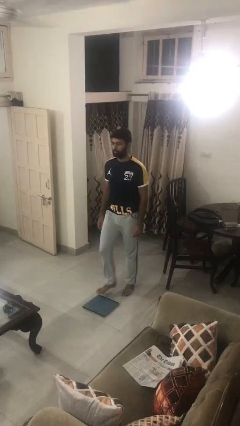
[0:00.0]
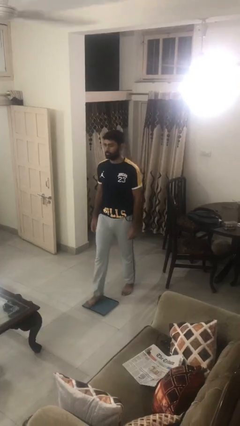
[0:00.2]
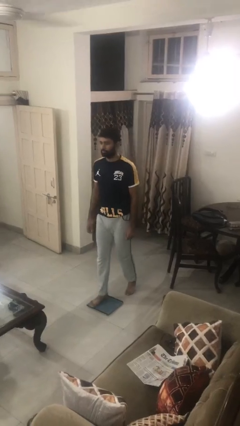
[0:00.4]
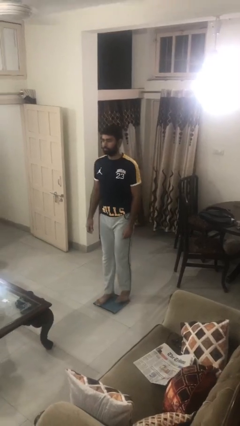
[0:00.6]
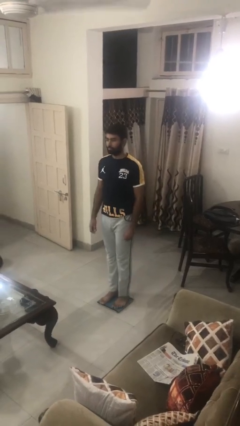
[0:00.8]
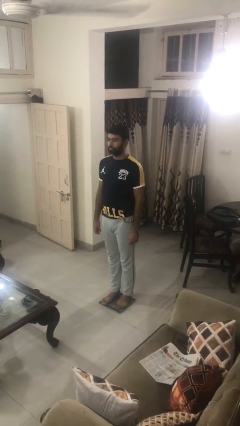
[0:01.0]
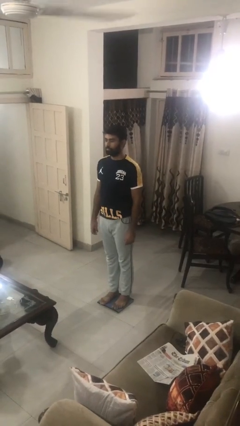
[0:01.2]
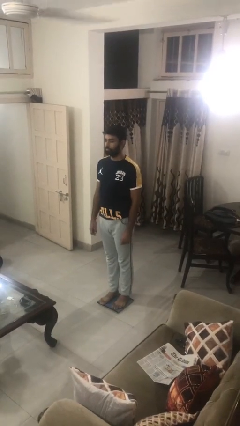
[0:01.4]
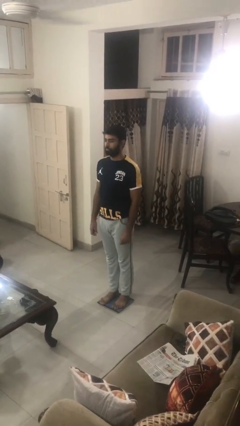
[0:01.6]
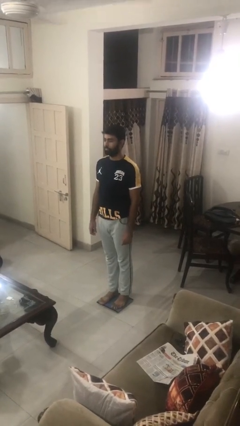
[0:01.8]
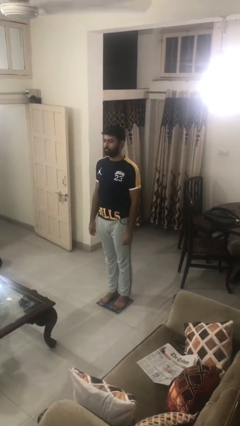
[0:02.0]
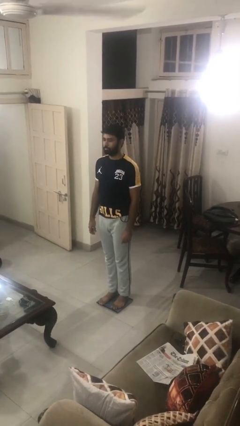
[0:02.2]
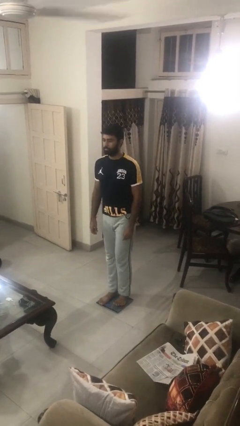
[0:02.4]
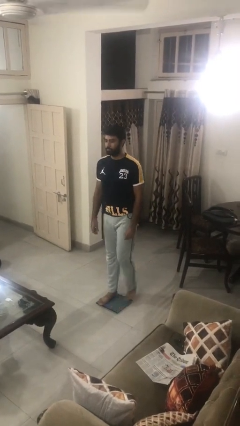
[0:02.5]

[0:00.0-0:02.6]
person uses bodyweight scale

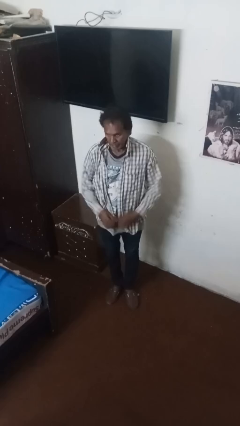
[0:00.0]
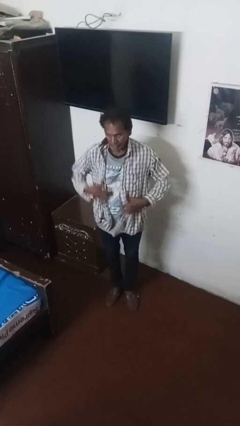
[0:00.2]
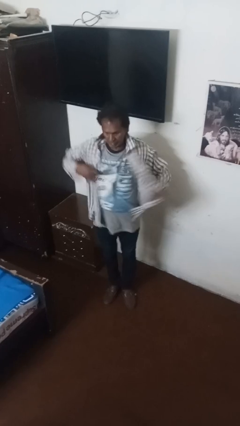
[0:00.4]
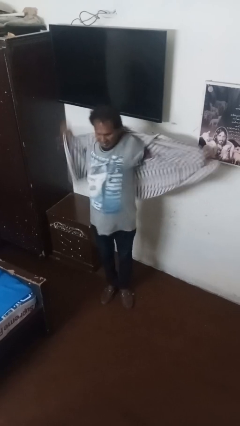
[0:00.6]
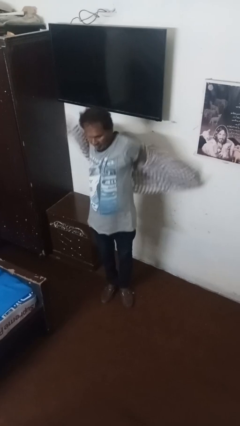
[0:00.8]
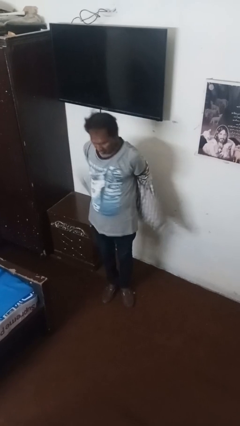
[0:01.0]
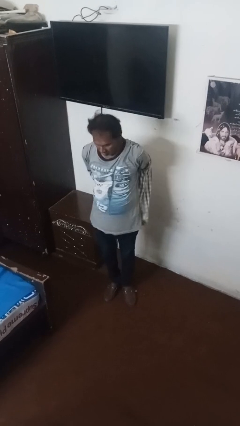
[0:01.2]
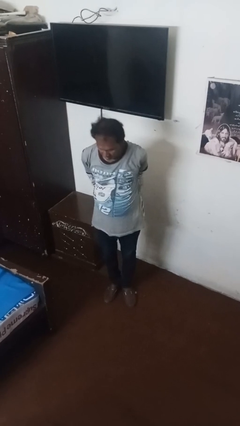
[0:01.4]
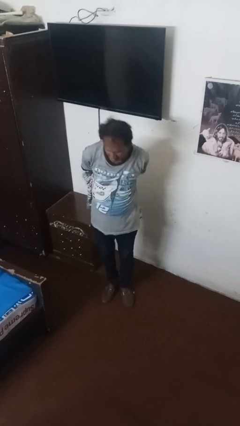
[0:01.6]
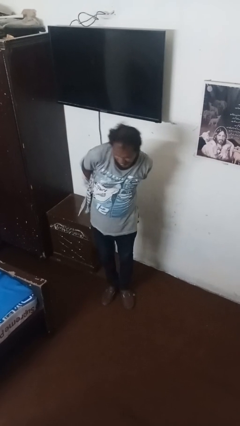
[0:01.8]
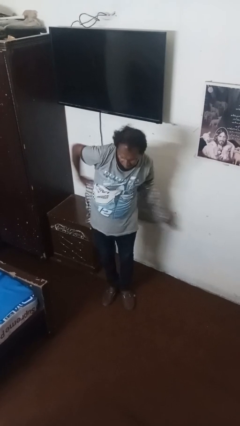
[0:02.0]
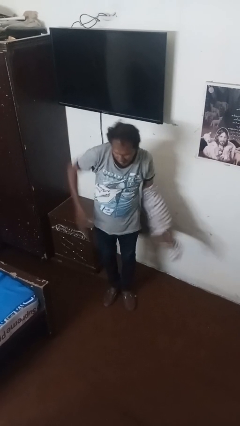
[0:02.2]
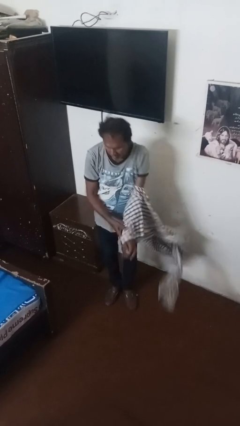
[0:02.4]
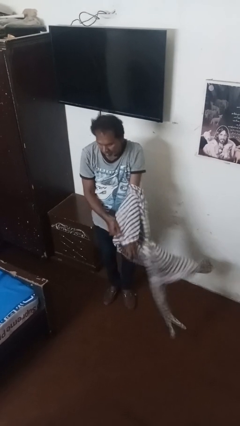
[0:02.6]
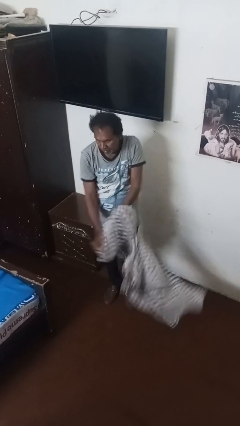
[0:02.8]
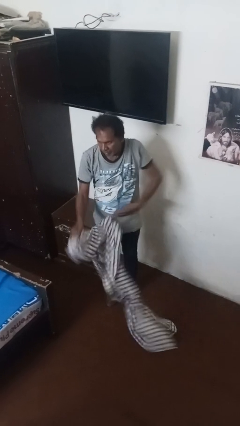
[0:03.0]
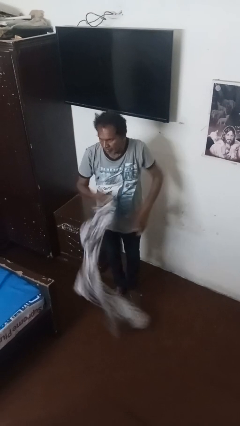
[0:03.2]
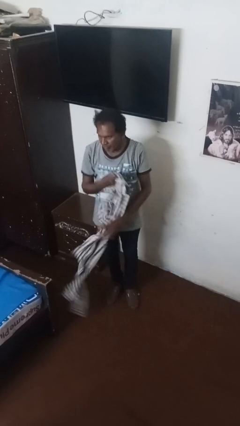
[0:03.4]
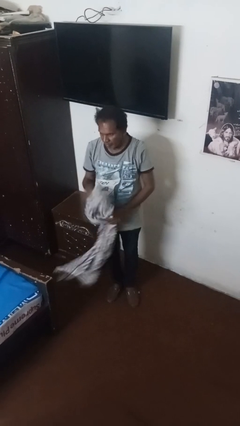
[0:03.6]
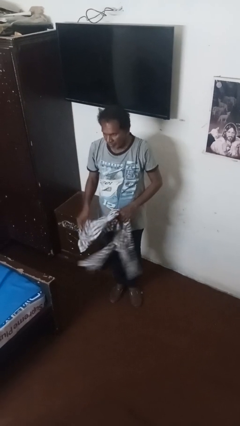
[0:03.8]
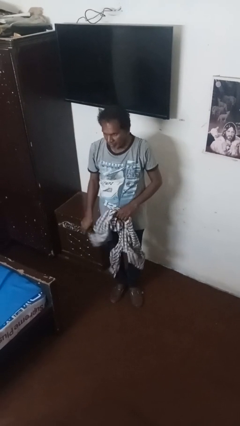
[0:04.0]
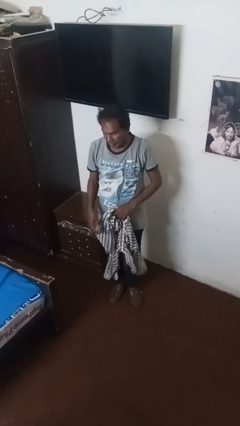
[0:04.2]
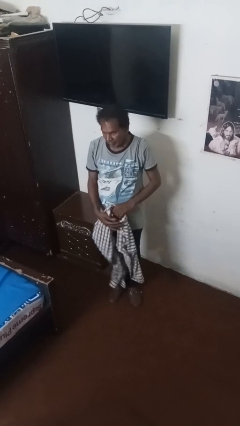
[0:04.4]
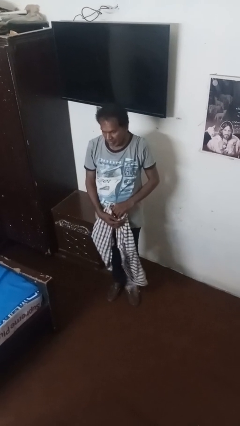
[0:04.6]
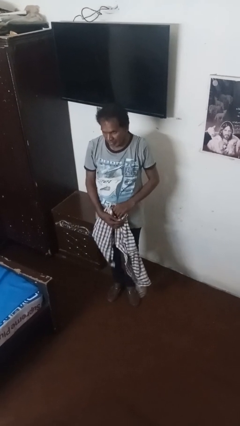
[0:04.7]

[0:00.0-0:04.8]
person takes off shirt

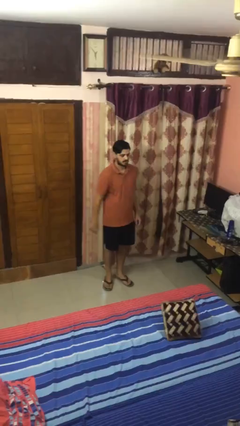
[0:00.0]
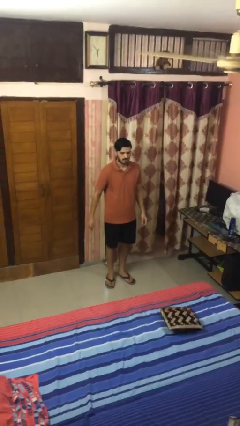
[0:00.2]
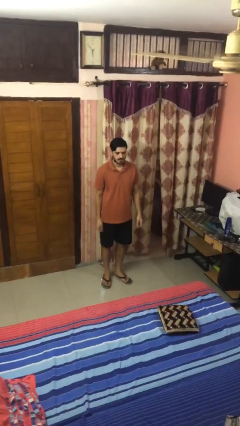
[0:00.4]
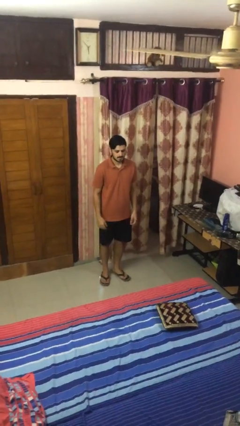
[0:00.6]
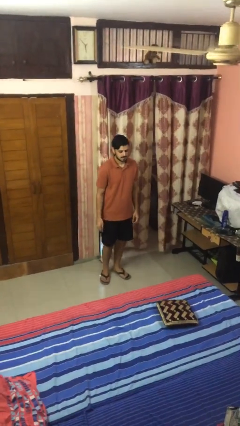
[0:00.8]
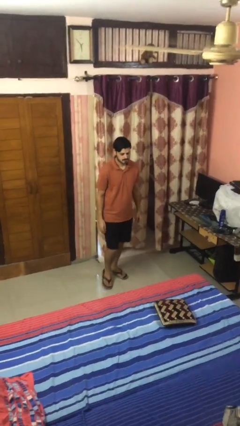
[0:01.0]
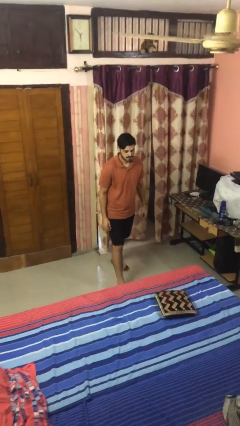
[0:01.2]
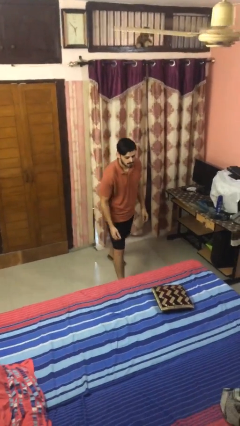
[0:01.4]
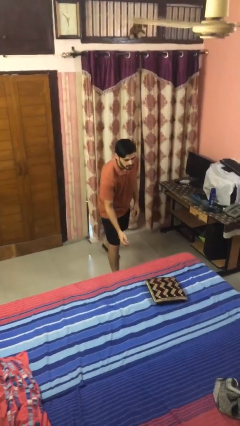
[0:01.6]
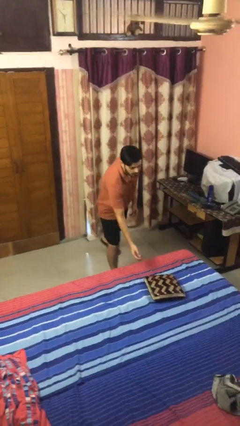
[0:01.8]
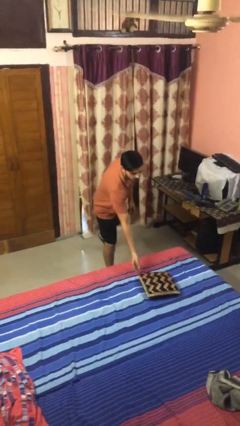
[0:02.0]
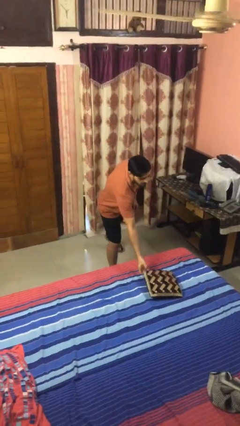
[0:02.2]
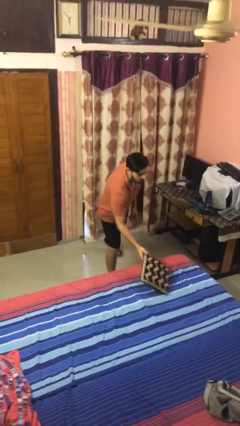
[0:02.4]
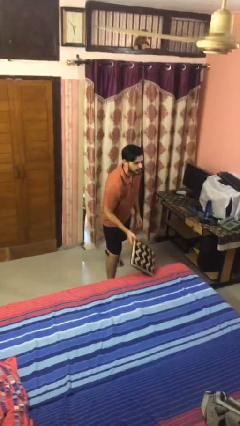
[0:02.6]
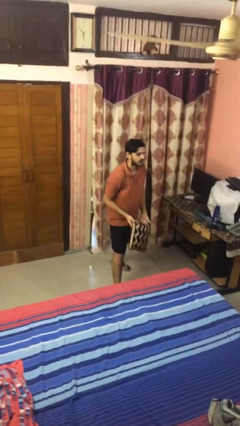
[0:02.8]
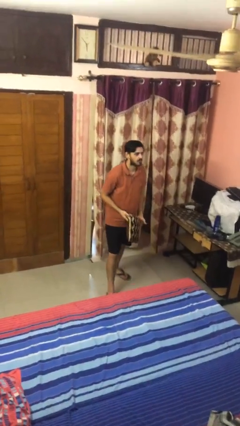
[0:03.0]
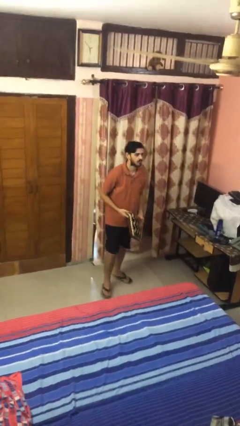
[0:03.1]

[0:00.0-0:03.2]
person picks up object from bed

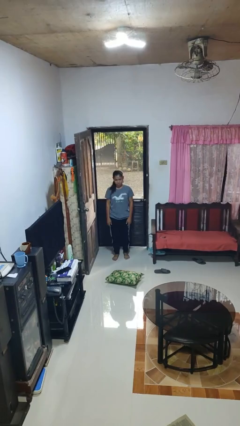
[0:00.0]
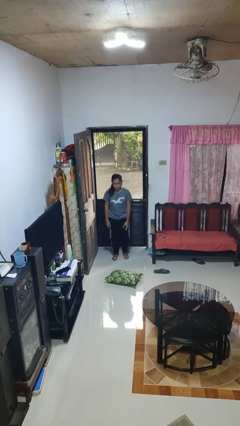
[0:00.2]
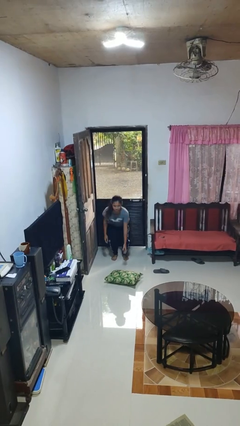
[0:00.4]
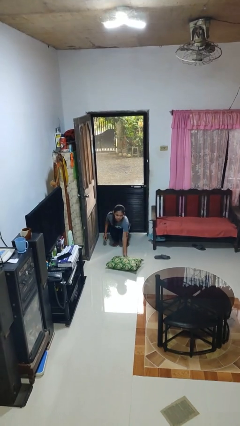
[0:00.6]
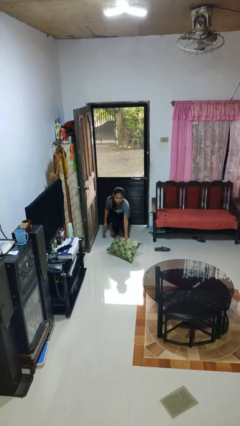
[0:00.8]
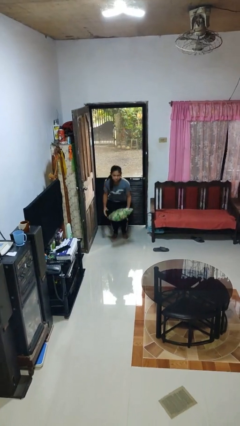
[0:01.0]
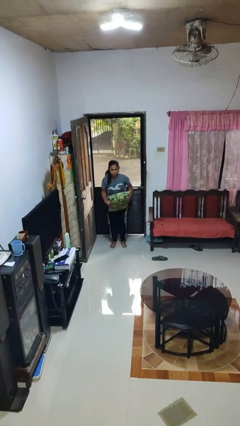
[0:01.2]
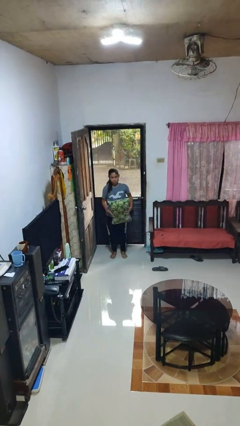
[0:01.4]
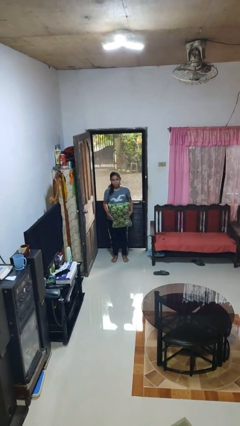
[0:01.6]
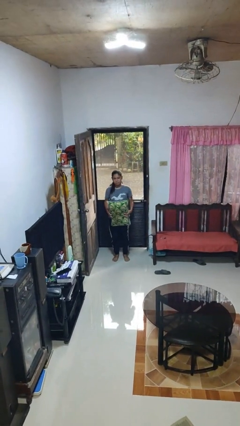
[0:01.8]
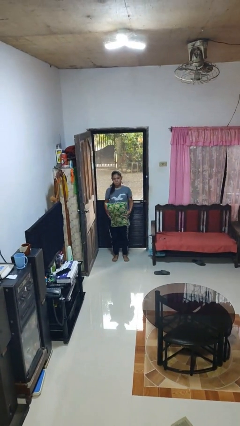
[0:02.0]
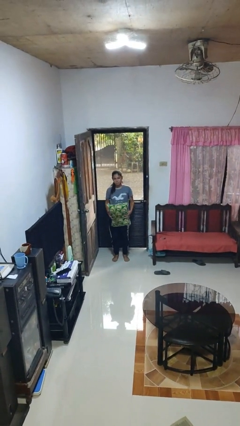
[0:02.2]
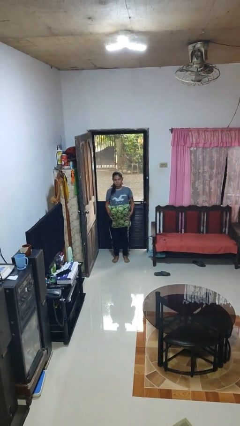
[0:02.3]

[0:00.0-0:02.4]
person picks up object from floor

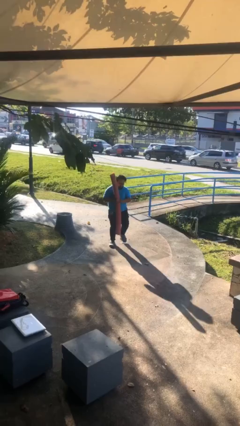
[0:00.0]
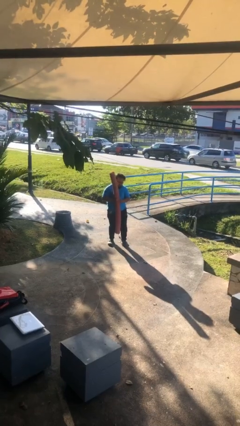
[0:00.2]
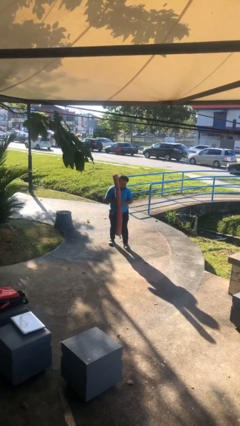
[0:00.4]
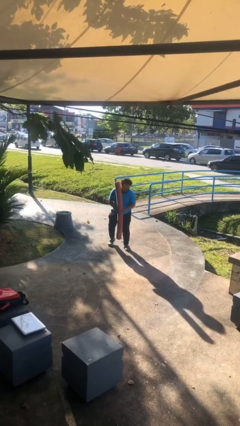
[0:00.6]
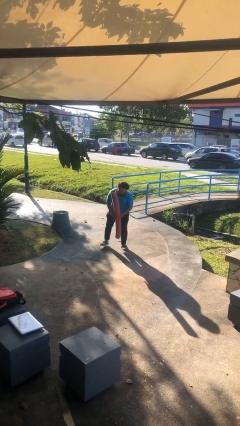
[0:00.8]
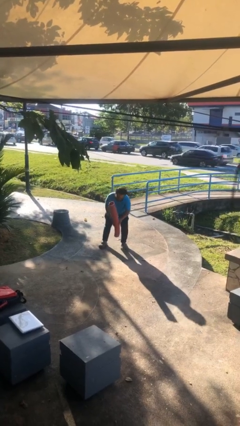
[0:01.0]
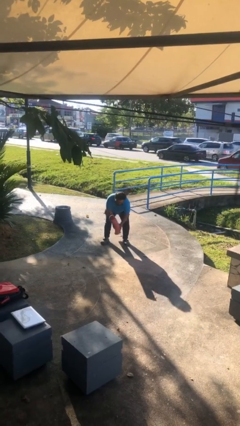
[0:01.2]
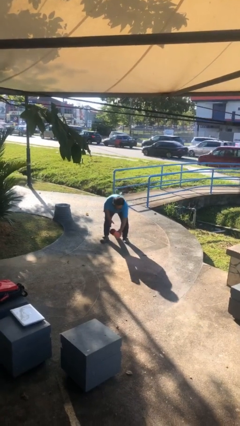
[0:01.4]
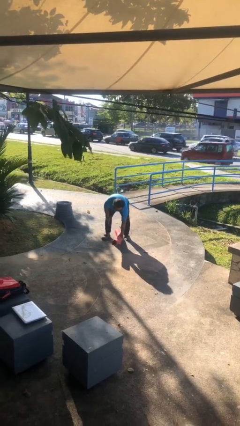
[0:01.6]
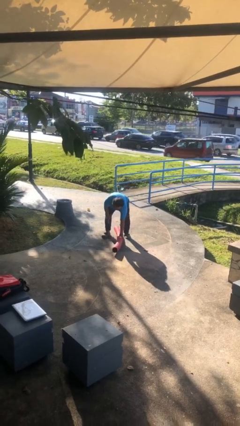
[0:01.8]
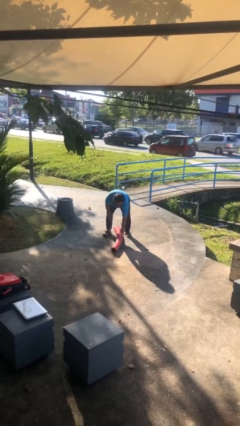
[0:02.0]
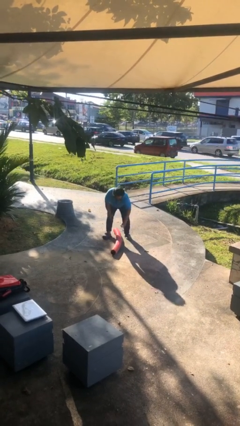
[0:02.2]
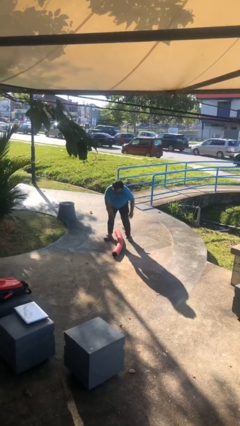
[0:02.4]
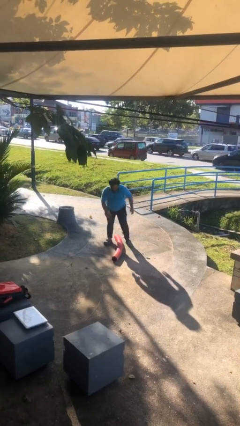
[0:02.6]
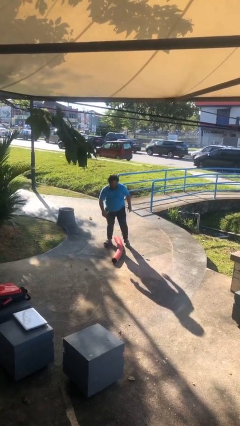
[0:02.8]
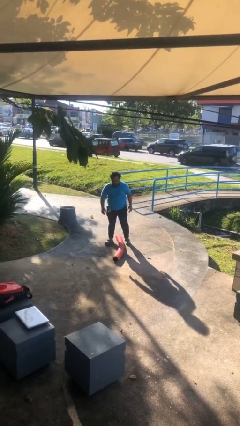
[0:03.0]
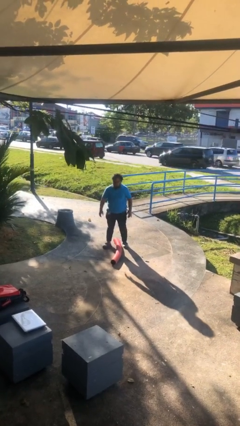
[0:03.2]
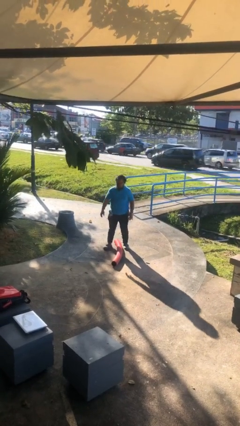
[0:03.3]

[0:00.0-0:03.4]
person puts down object on floor

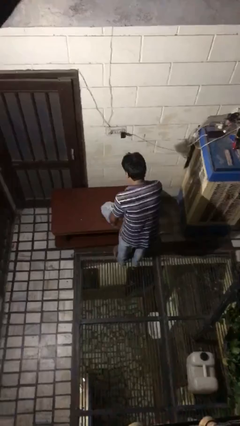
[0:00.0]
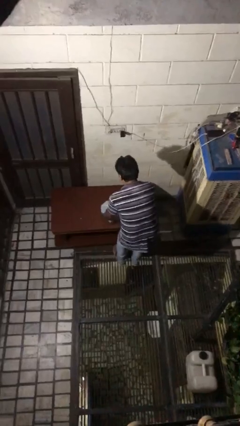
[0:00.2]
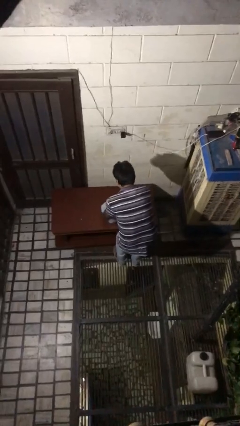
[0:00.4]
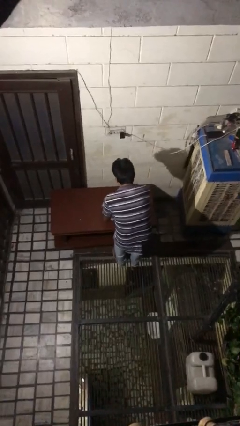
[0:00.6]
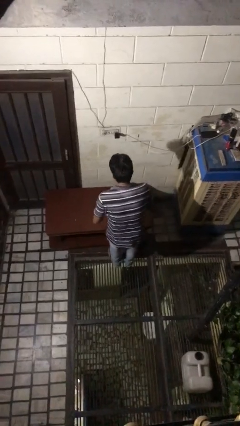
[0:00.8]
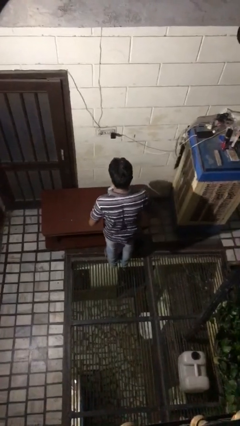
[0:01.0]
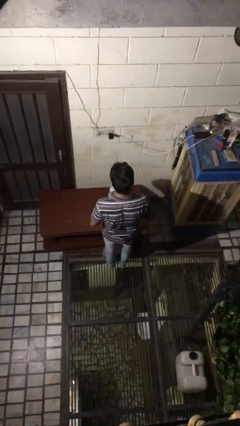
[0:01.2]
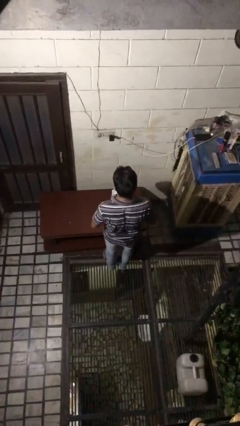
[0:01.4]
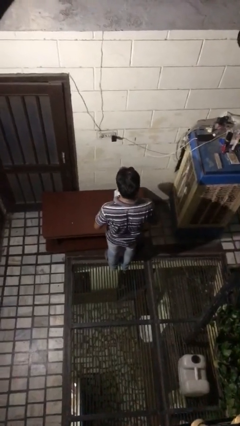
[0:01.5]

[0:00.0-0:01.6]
person picks up object from table
